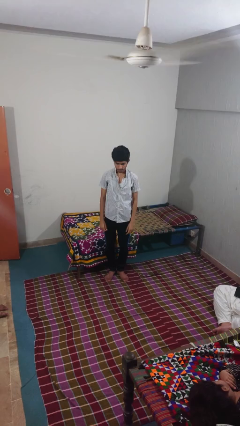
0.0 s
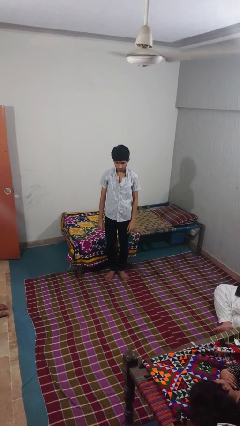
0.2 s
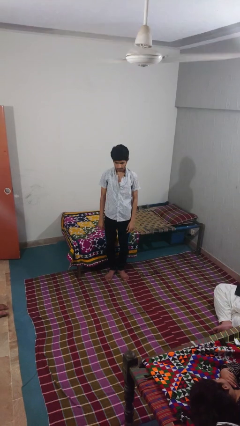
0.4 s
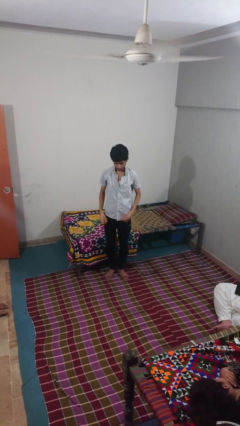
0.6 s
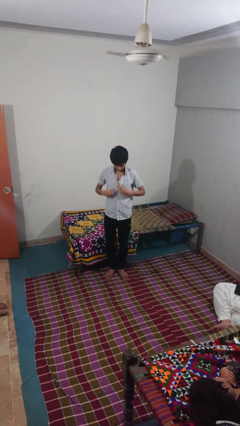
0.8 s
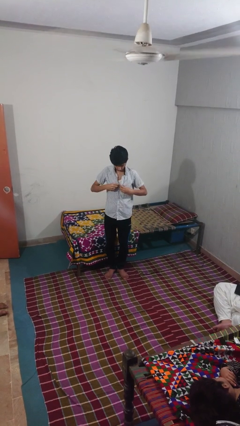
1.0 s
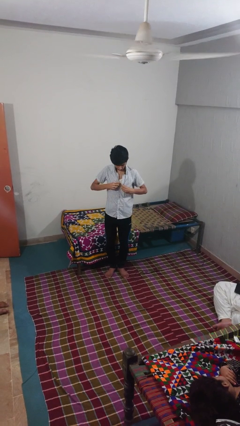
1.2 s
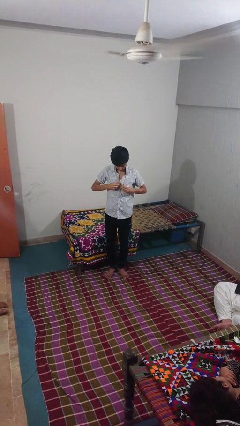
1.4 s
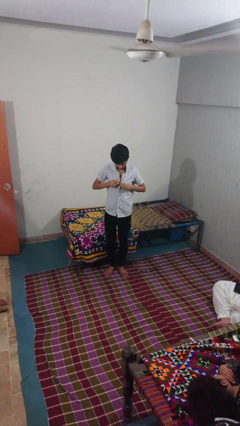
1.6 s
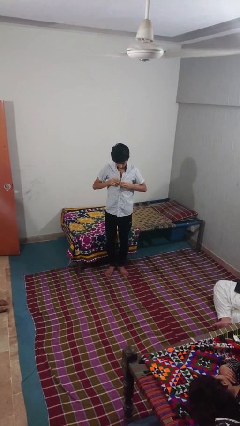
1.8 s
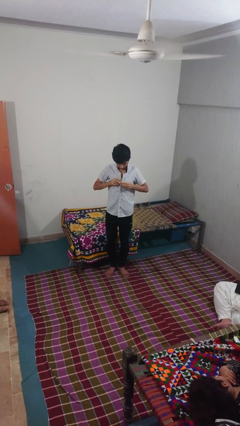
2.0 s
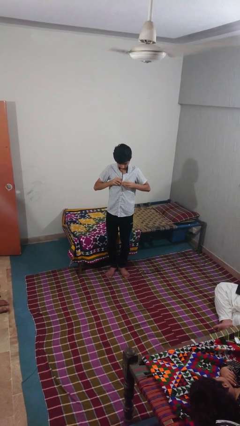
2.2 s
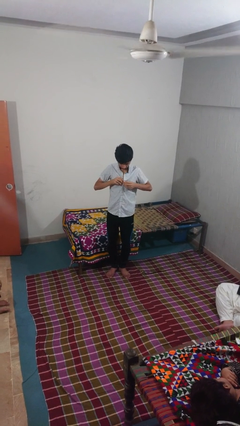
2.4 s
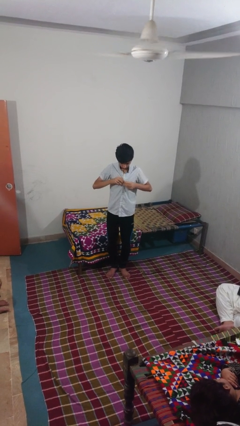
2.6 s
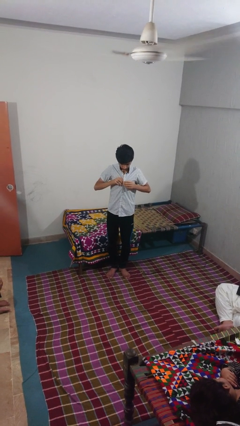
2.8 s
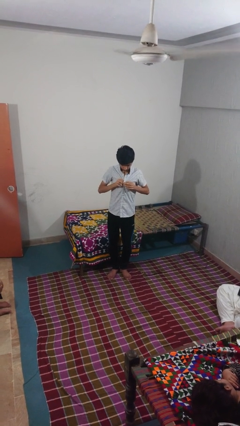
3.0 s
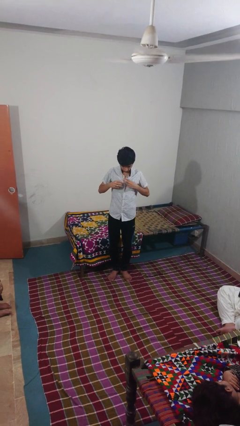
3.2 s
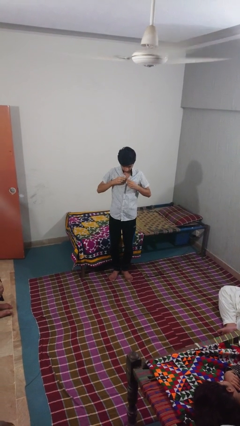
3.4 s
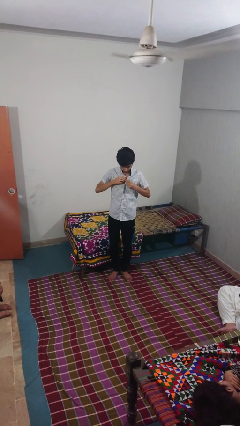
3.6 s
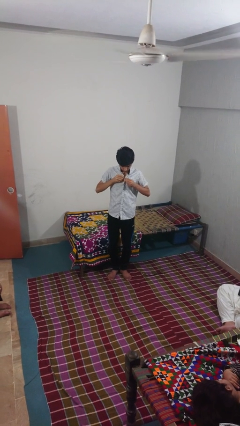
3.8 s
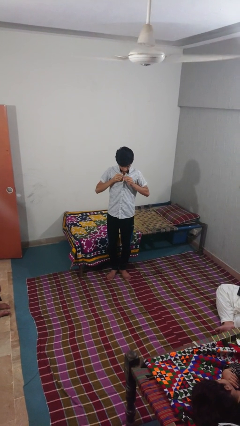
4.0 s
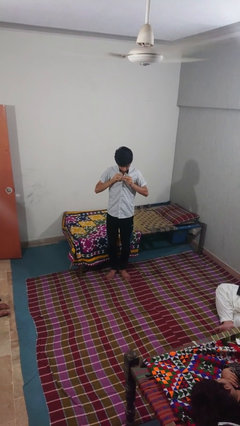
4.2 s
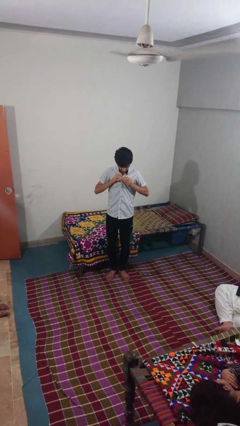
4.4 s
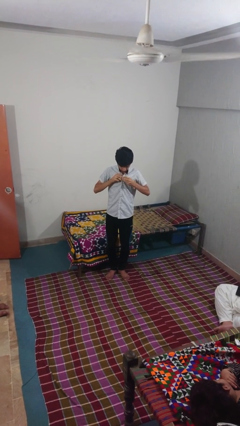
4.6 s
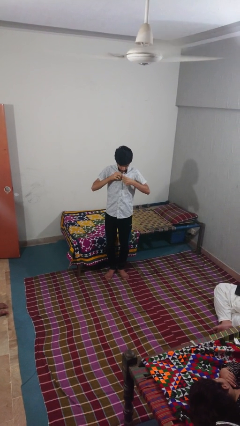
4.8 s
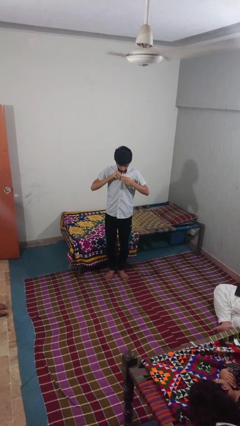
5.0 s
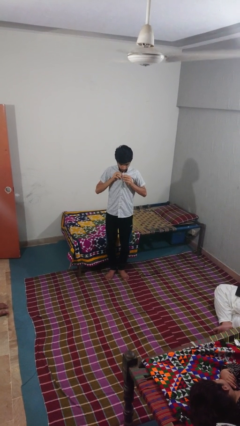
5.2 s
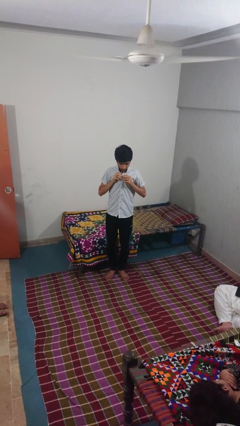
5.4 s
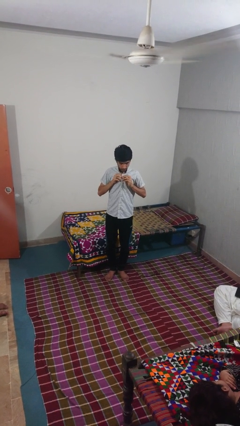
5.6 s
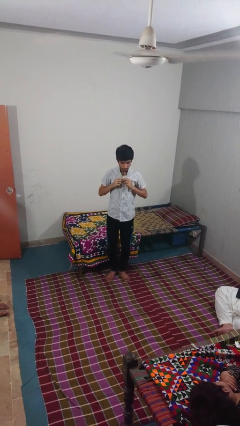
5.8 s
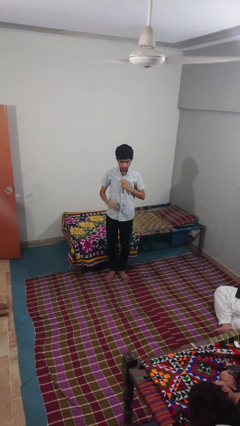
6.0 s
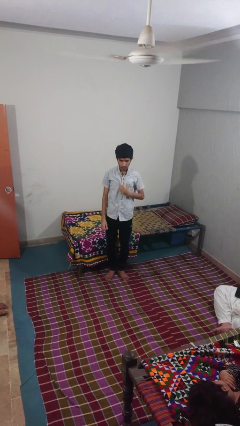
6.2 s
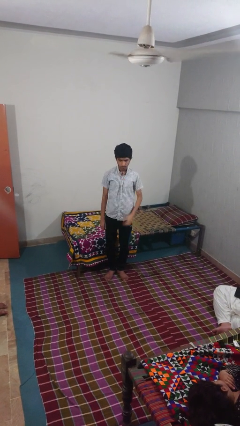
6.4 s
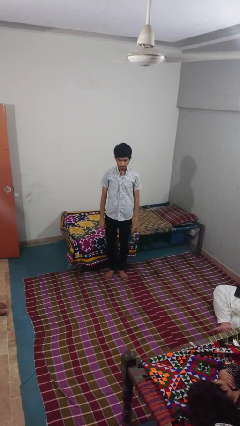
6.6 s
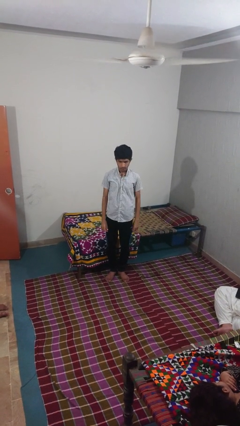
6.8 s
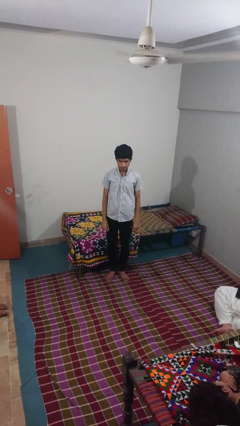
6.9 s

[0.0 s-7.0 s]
person buttons shirt

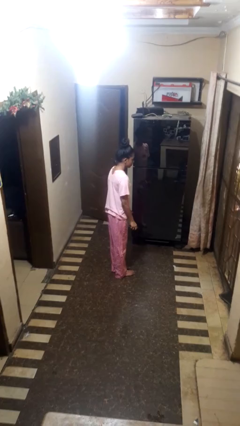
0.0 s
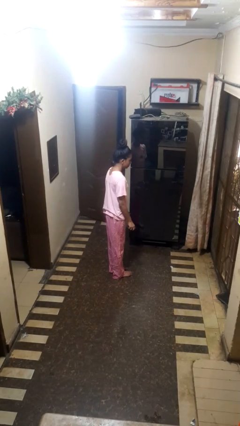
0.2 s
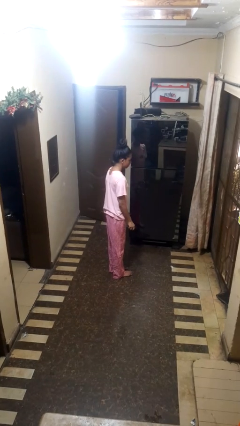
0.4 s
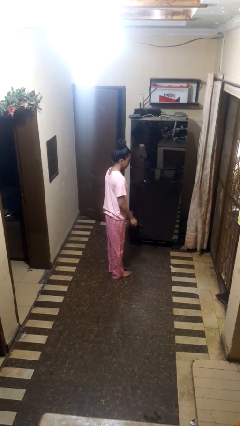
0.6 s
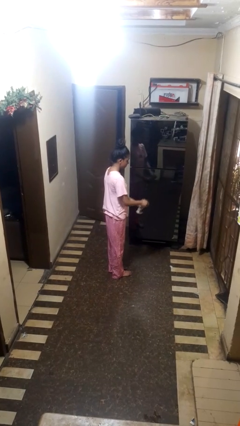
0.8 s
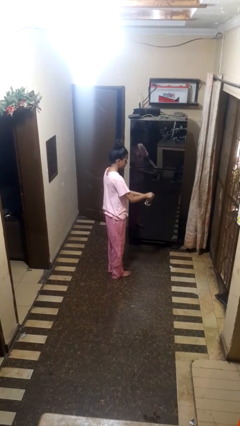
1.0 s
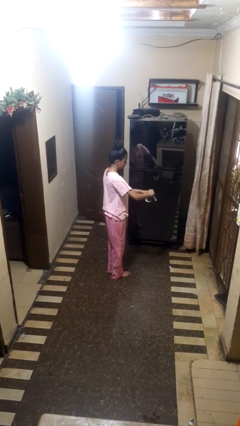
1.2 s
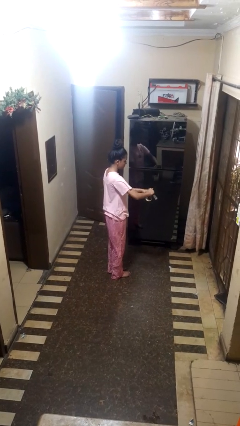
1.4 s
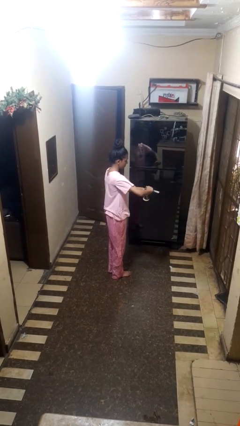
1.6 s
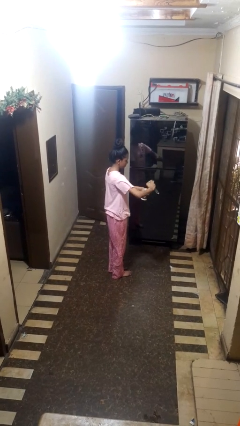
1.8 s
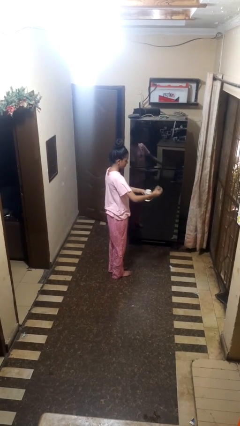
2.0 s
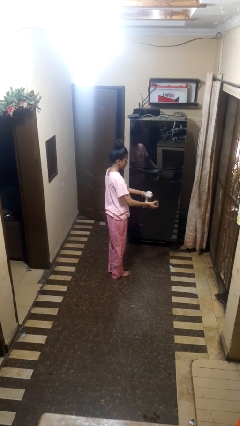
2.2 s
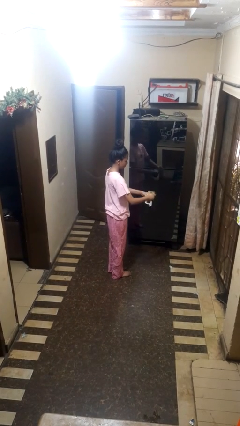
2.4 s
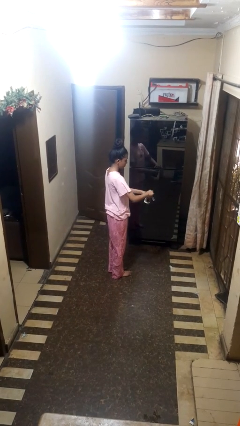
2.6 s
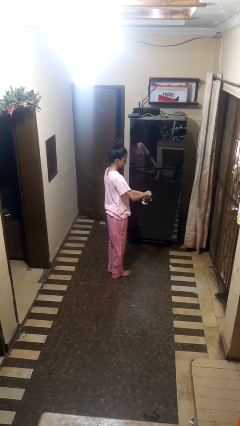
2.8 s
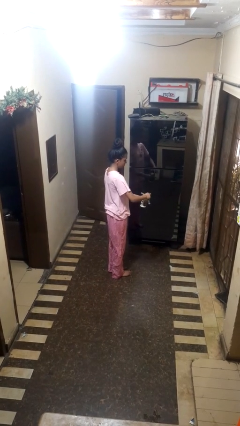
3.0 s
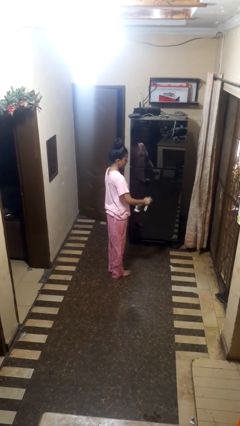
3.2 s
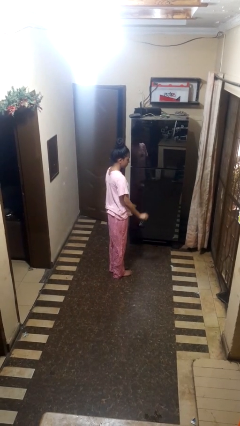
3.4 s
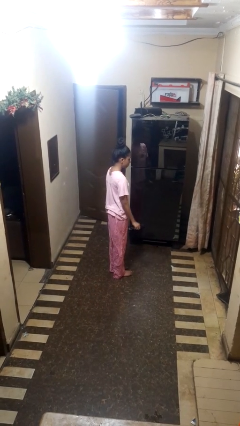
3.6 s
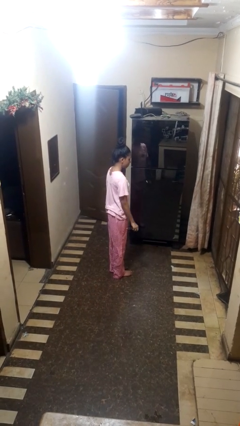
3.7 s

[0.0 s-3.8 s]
person opens can with can opener

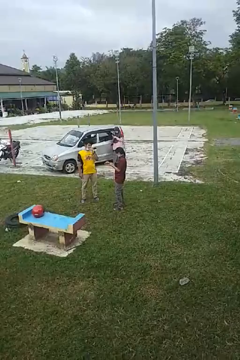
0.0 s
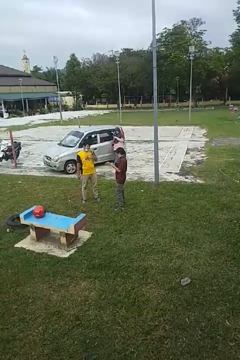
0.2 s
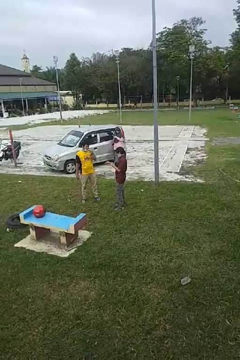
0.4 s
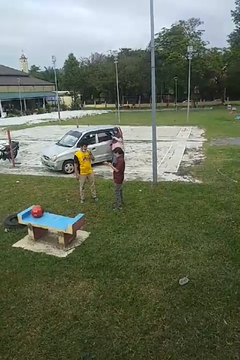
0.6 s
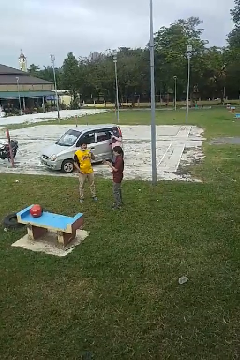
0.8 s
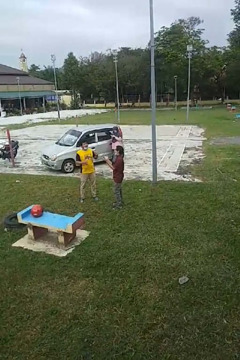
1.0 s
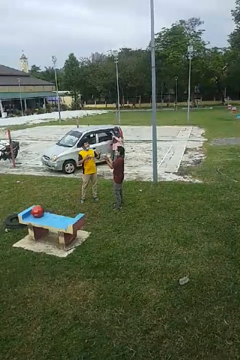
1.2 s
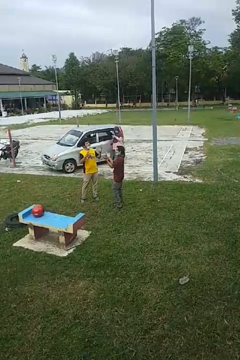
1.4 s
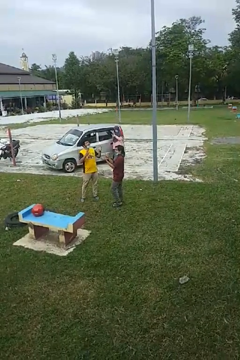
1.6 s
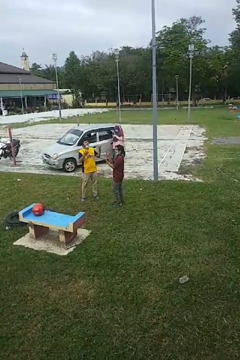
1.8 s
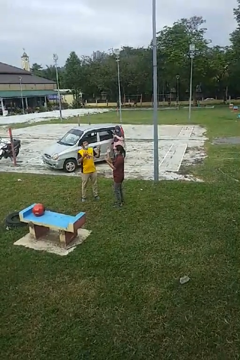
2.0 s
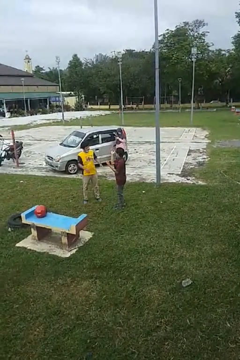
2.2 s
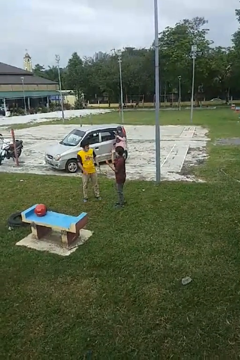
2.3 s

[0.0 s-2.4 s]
person talks to person

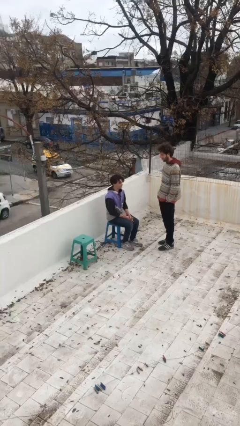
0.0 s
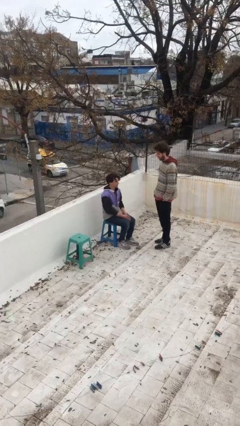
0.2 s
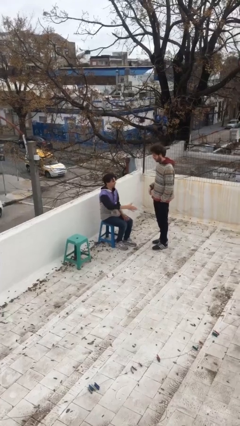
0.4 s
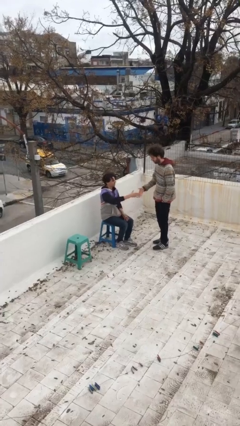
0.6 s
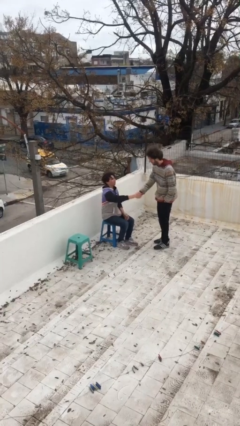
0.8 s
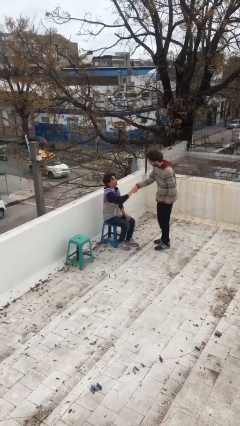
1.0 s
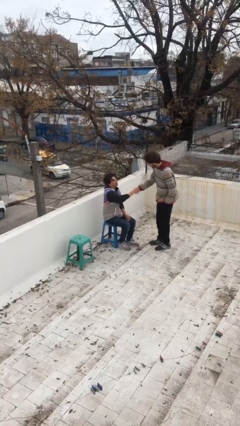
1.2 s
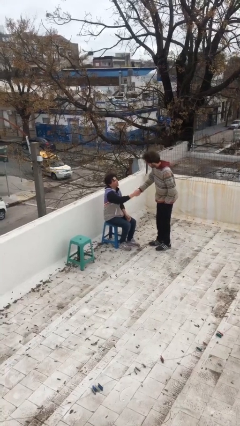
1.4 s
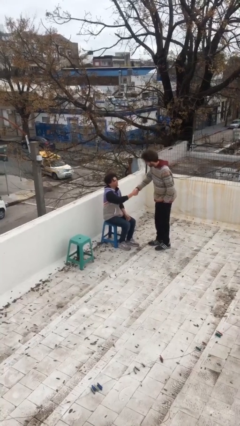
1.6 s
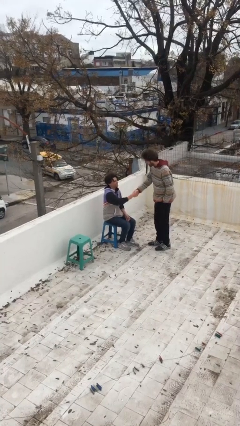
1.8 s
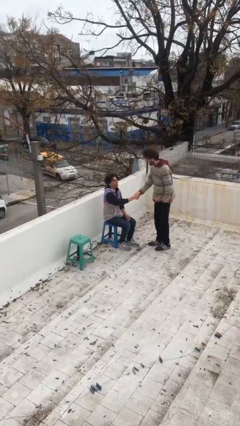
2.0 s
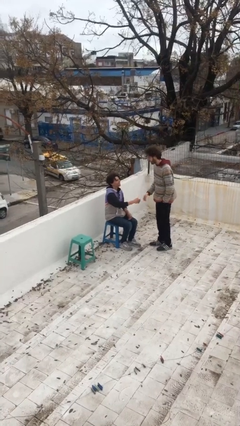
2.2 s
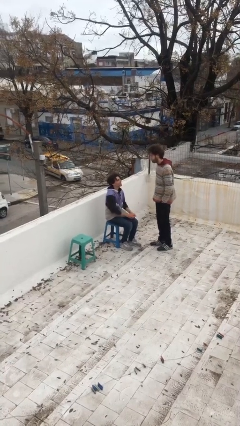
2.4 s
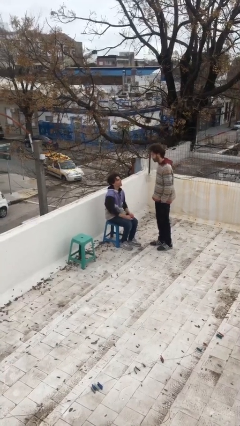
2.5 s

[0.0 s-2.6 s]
person shakes hand

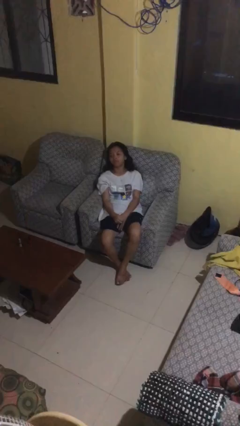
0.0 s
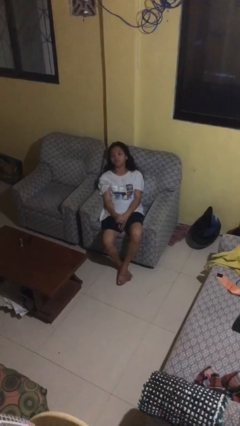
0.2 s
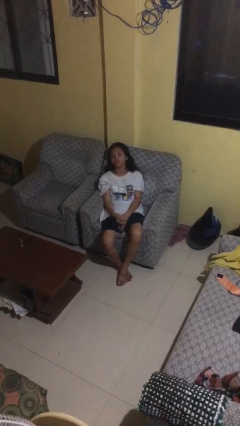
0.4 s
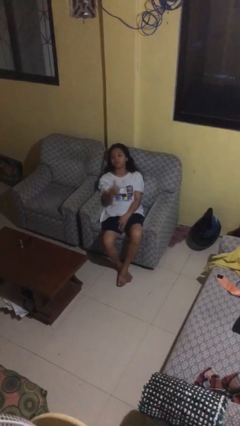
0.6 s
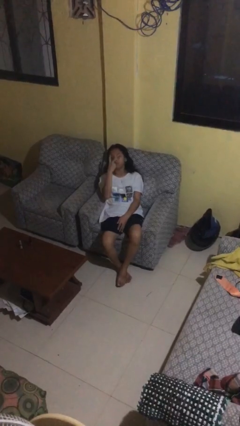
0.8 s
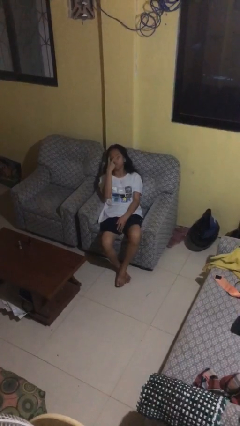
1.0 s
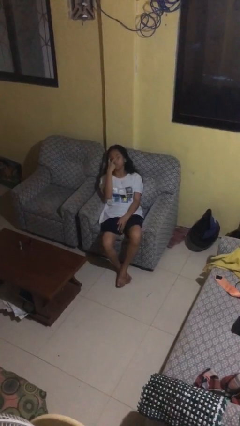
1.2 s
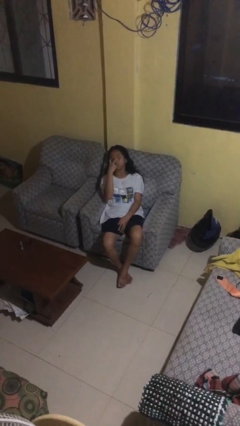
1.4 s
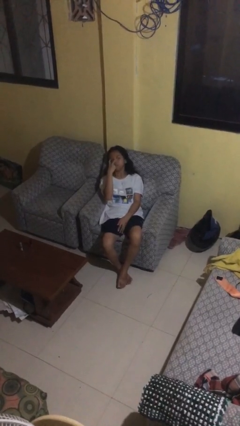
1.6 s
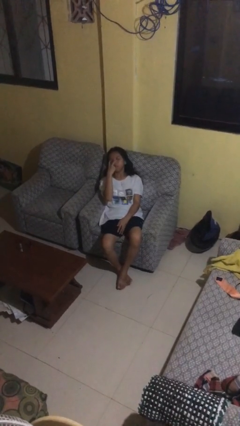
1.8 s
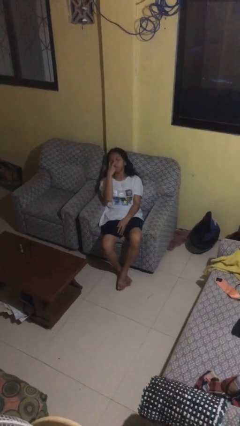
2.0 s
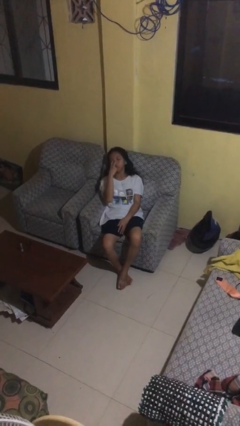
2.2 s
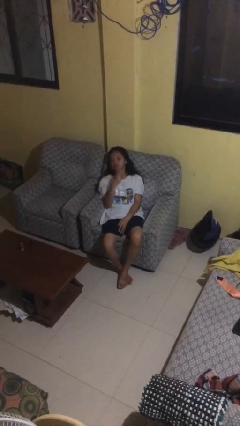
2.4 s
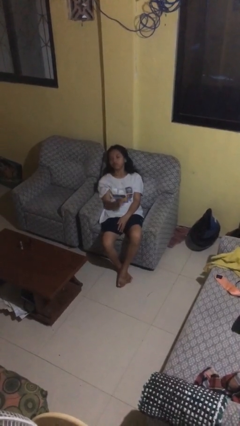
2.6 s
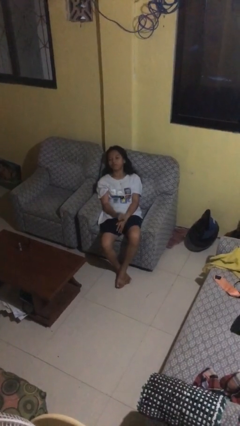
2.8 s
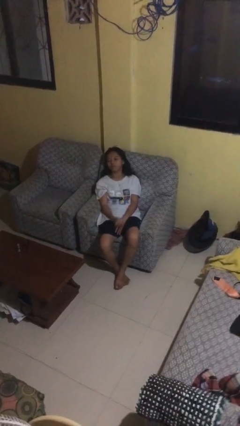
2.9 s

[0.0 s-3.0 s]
person gestures watch closely
